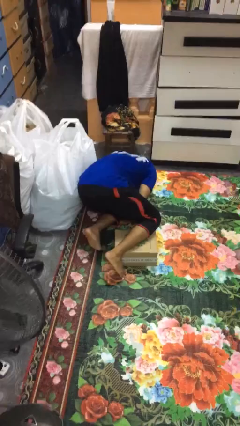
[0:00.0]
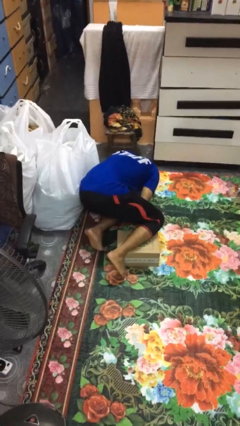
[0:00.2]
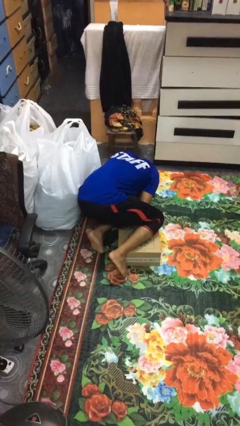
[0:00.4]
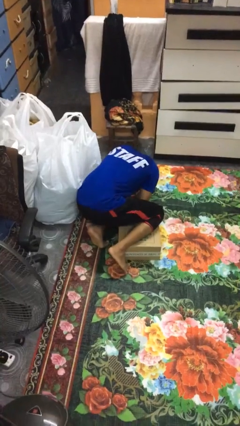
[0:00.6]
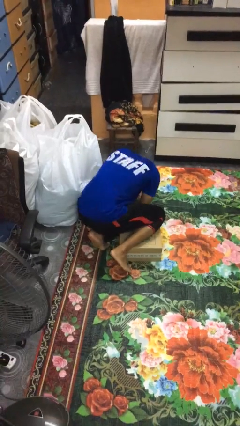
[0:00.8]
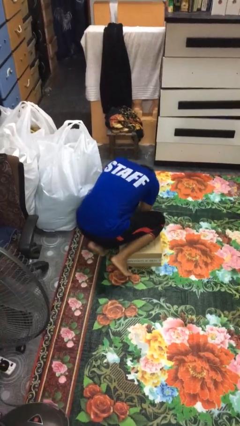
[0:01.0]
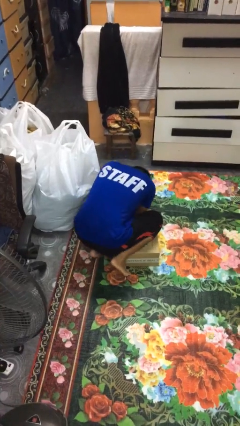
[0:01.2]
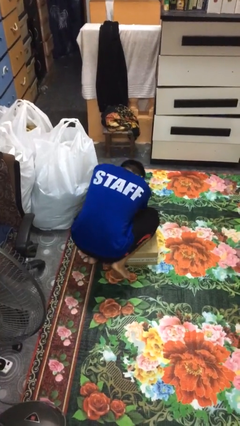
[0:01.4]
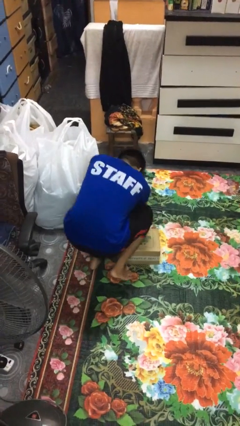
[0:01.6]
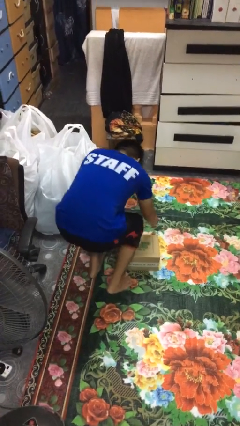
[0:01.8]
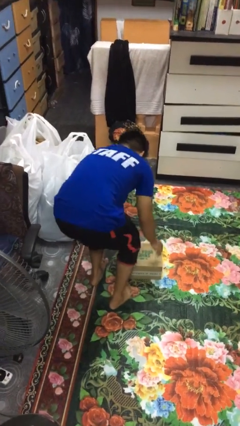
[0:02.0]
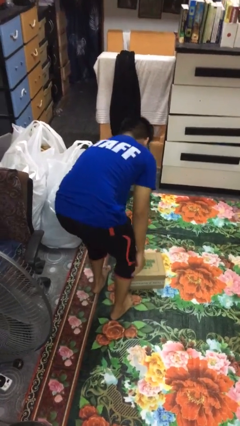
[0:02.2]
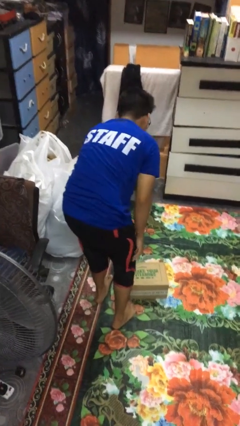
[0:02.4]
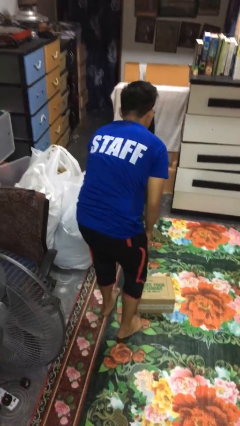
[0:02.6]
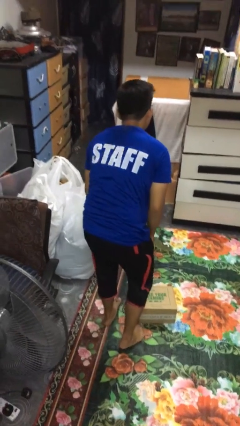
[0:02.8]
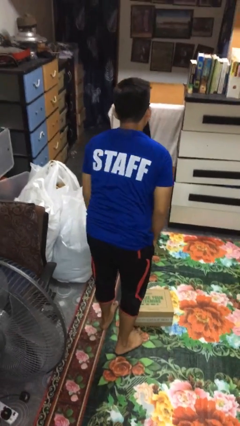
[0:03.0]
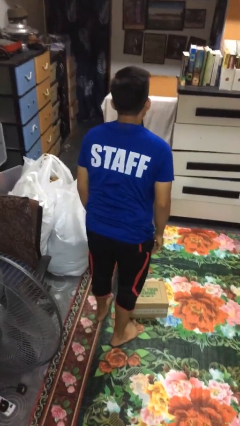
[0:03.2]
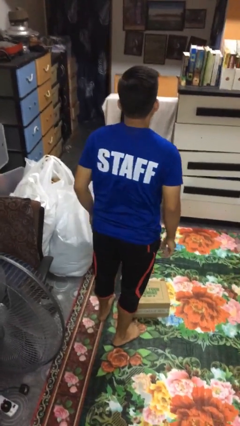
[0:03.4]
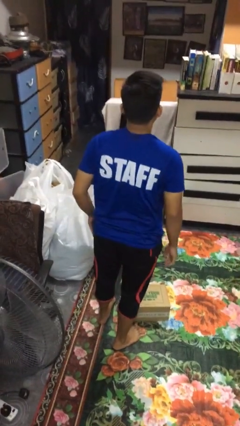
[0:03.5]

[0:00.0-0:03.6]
person stands up from floor

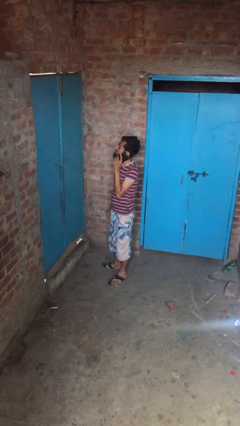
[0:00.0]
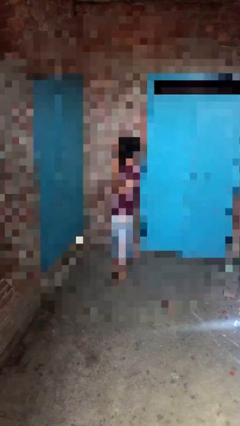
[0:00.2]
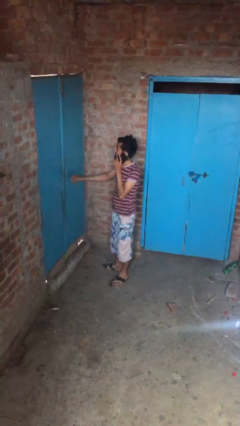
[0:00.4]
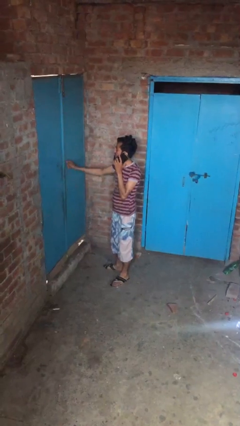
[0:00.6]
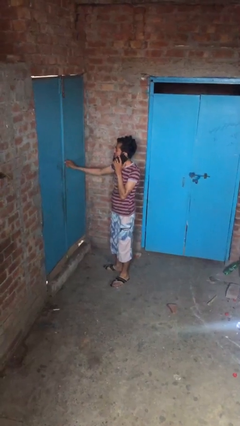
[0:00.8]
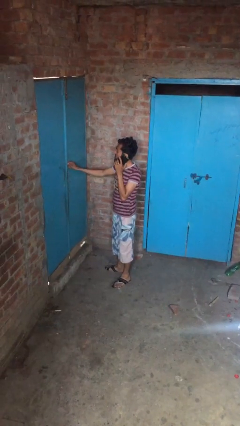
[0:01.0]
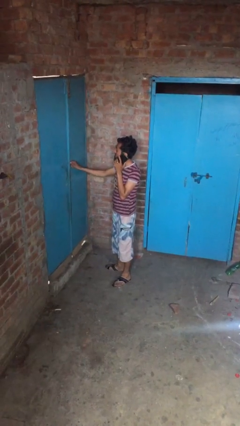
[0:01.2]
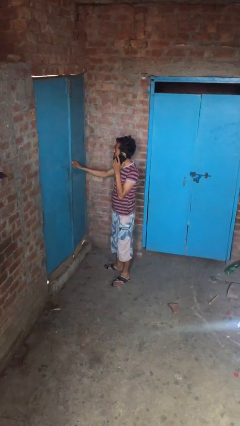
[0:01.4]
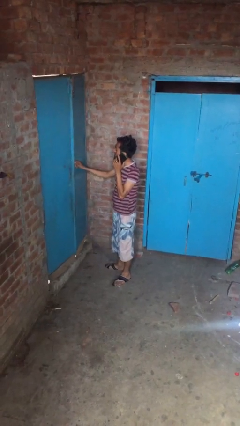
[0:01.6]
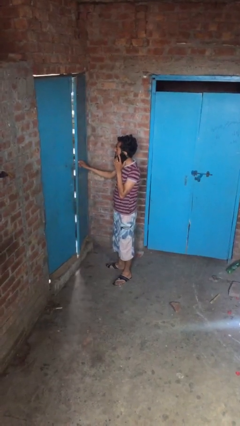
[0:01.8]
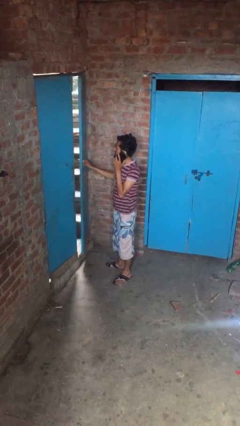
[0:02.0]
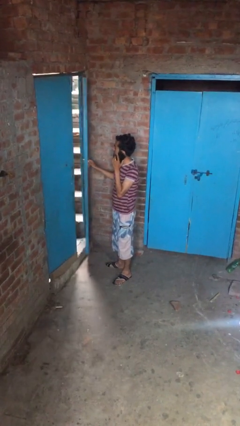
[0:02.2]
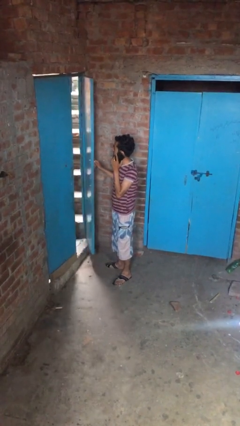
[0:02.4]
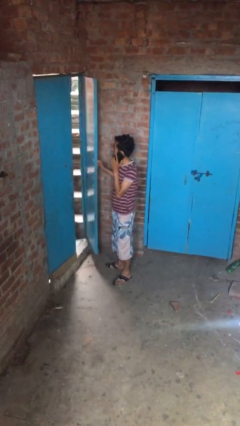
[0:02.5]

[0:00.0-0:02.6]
person opens facility door

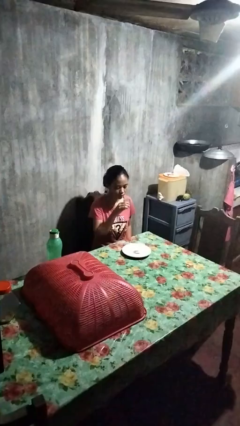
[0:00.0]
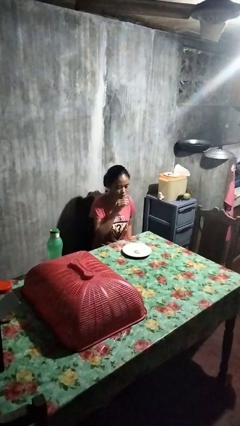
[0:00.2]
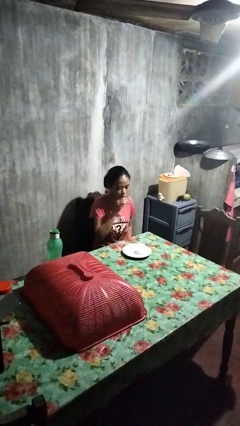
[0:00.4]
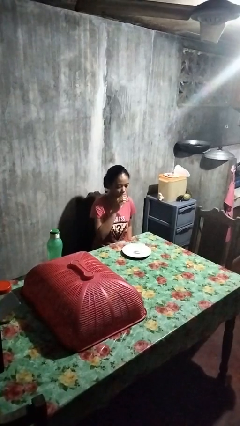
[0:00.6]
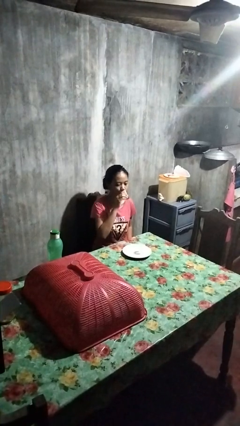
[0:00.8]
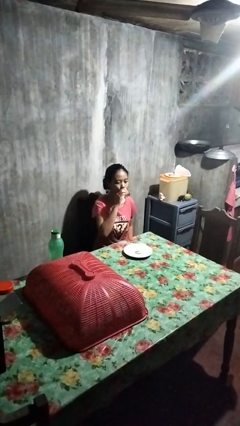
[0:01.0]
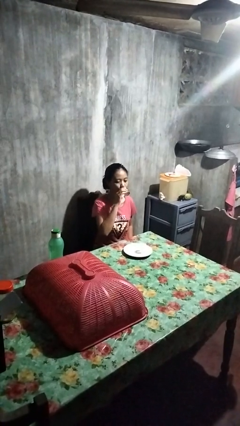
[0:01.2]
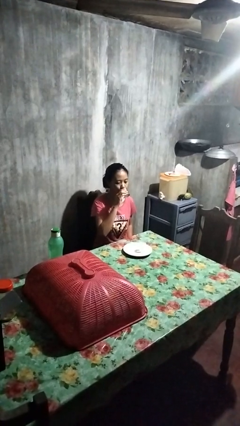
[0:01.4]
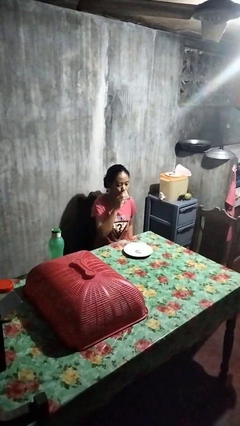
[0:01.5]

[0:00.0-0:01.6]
person drinks from shotglass

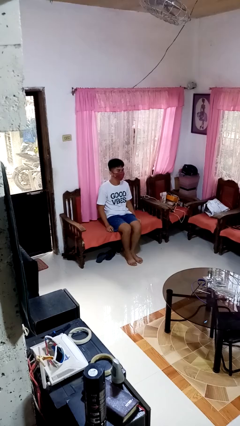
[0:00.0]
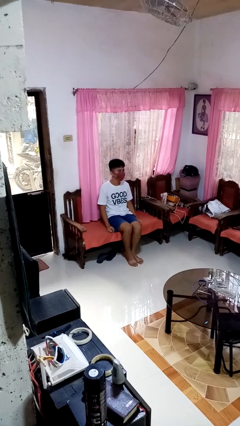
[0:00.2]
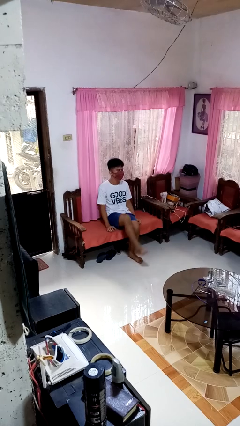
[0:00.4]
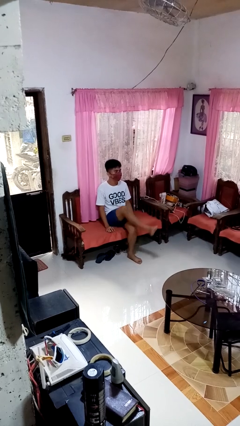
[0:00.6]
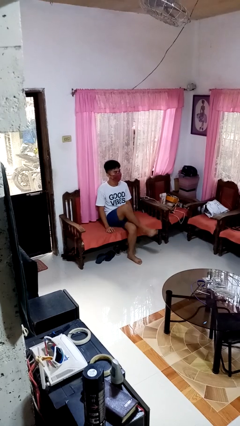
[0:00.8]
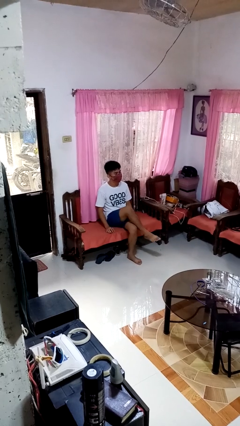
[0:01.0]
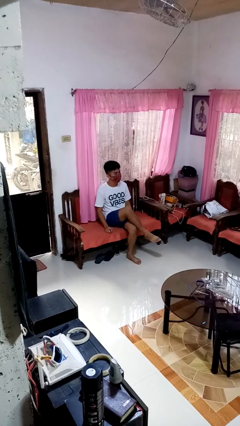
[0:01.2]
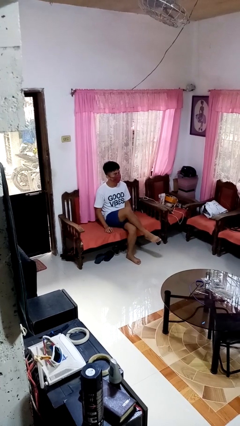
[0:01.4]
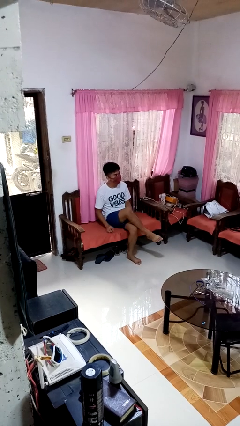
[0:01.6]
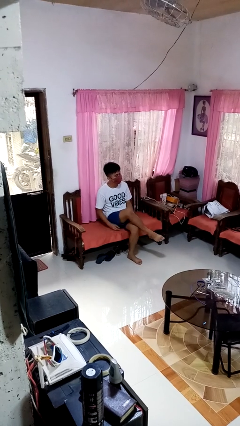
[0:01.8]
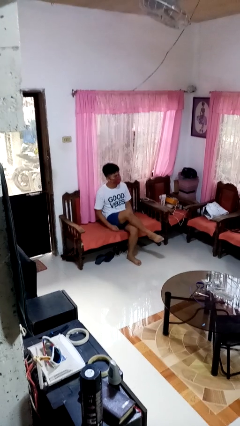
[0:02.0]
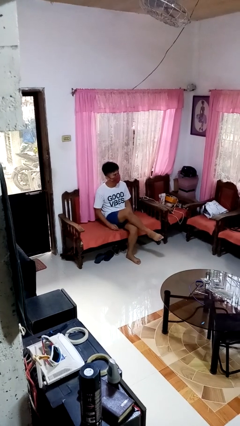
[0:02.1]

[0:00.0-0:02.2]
person crosses legs

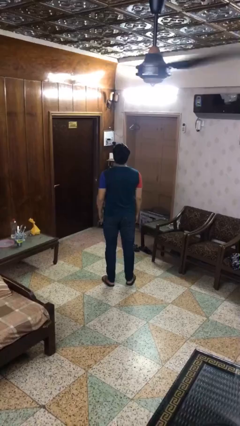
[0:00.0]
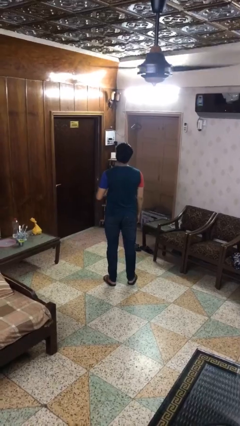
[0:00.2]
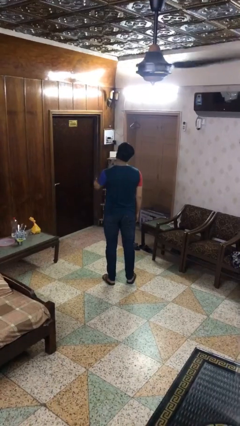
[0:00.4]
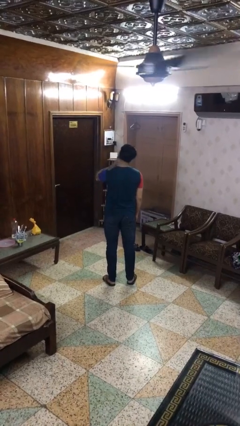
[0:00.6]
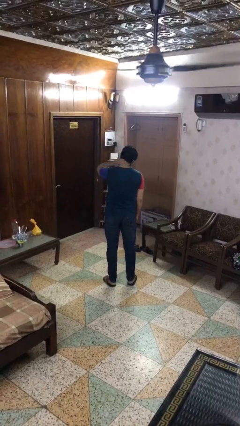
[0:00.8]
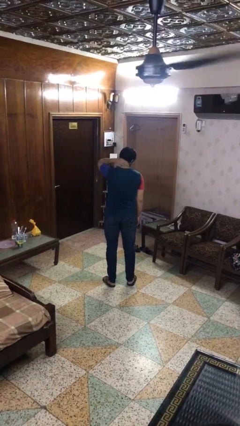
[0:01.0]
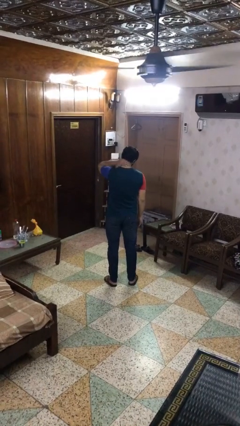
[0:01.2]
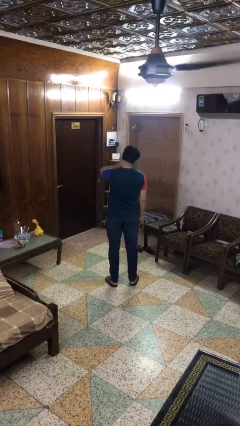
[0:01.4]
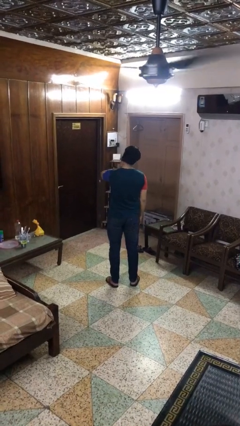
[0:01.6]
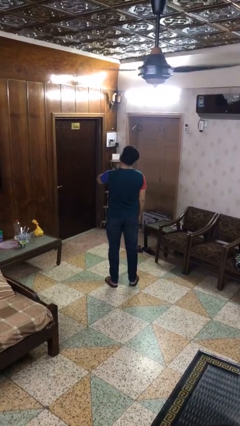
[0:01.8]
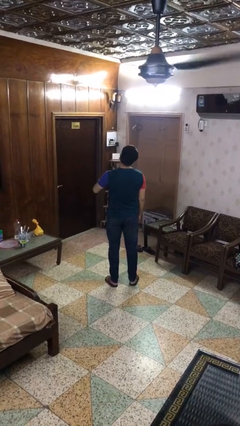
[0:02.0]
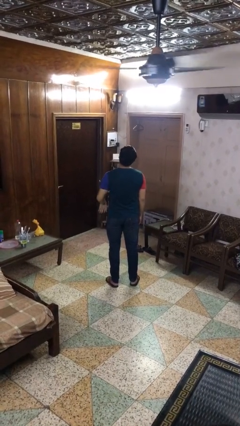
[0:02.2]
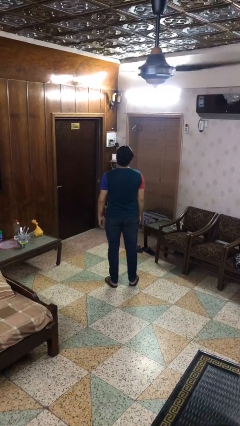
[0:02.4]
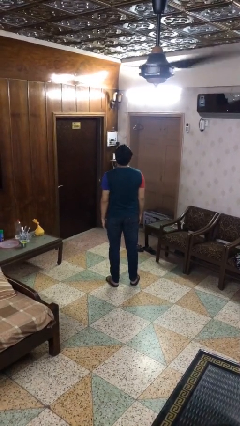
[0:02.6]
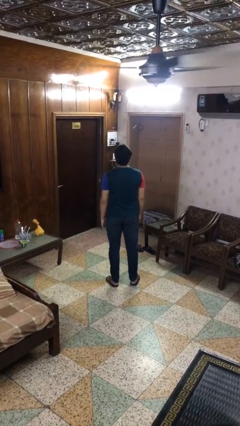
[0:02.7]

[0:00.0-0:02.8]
person rubs neck

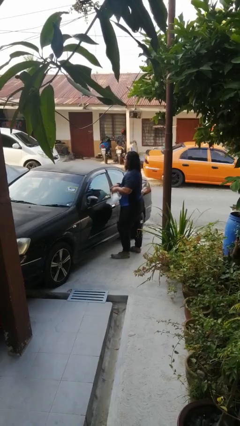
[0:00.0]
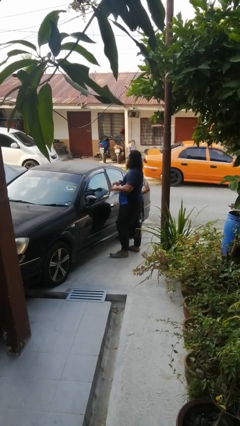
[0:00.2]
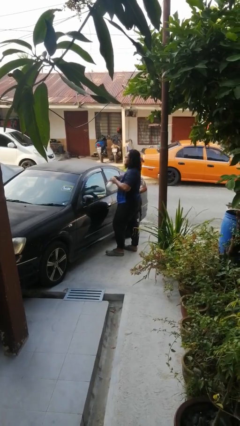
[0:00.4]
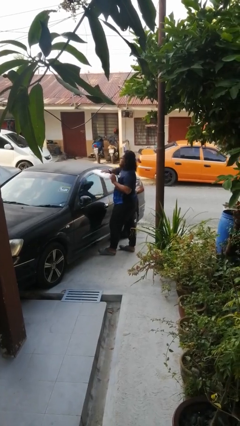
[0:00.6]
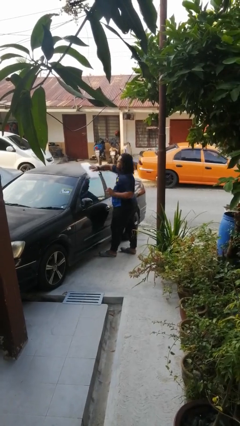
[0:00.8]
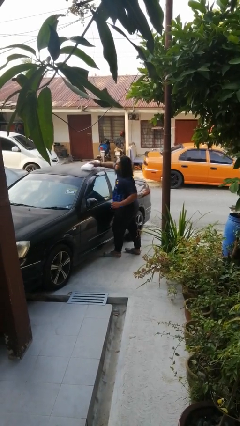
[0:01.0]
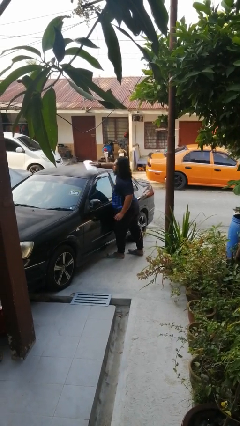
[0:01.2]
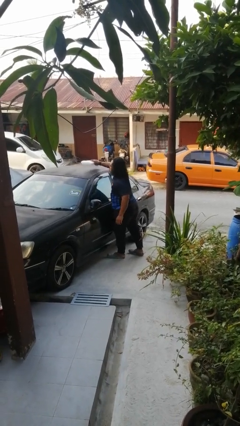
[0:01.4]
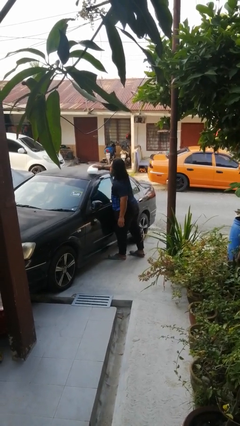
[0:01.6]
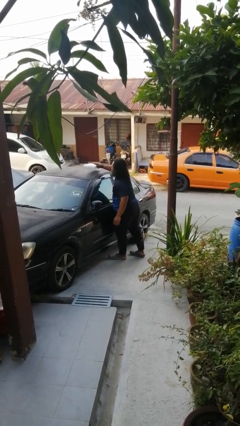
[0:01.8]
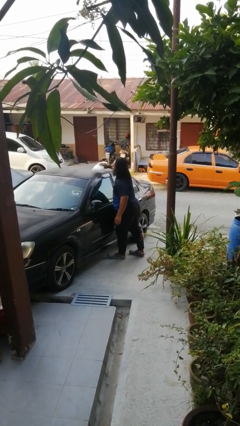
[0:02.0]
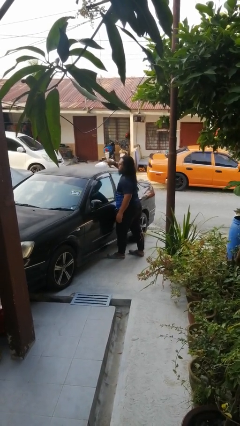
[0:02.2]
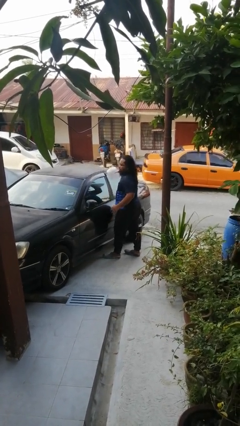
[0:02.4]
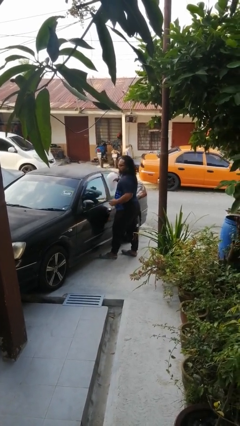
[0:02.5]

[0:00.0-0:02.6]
person polishes car with rag

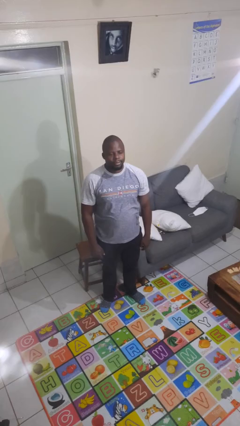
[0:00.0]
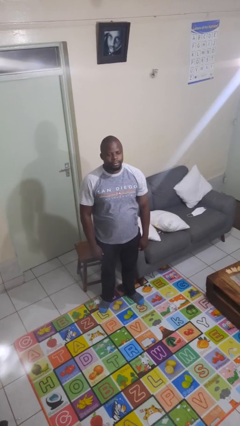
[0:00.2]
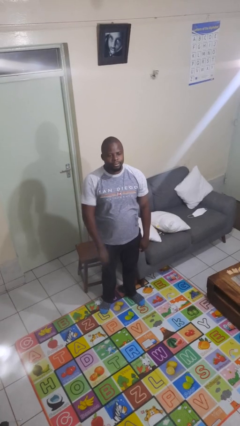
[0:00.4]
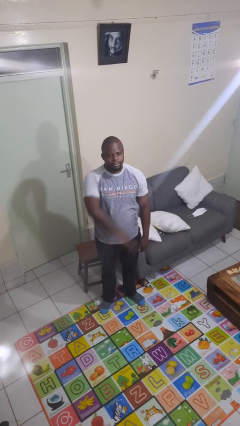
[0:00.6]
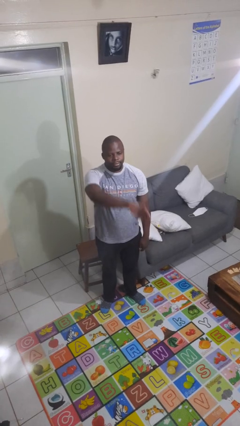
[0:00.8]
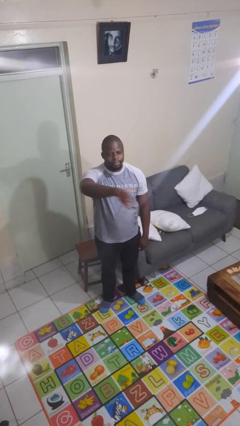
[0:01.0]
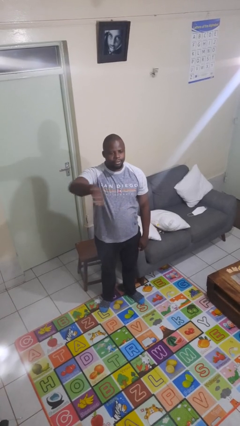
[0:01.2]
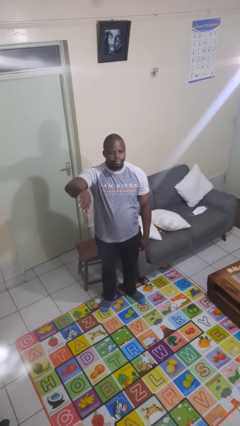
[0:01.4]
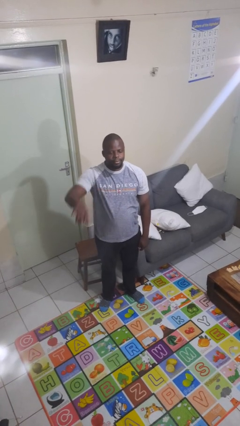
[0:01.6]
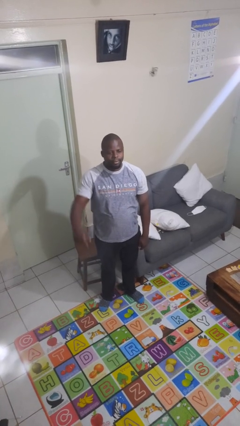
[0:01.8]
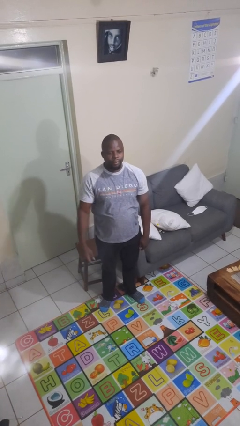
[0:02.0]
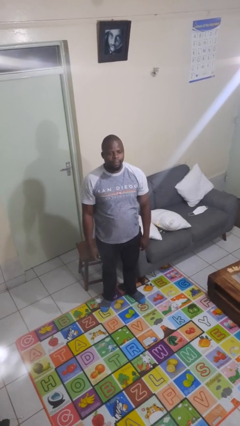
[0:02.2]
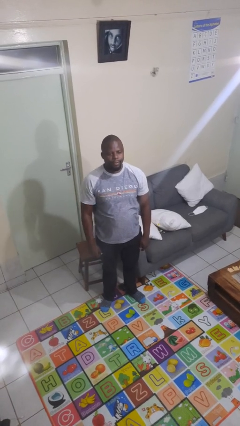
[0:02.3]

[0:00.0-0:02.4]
person gestures swipe right
